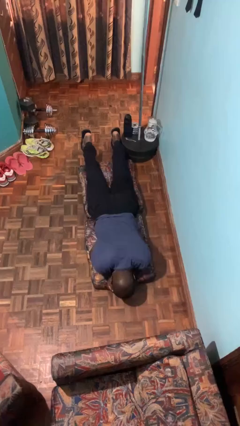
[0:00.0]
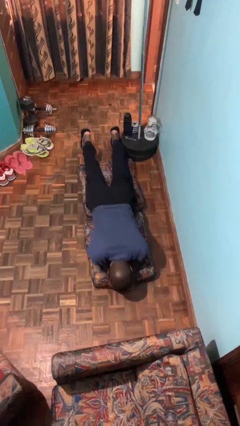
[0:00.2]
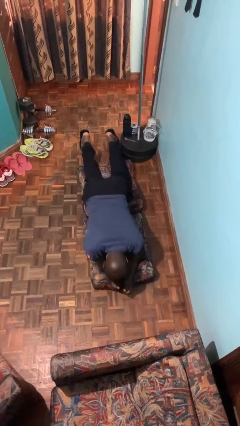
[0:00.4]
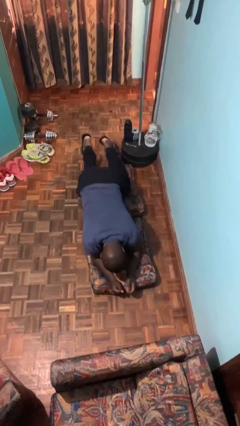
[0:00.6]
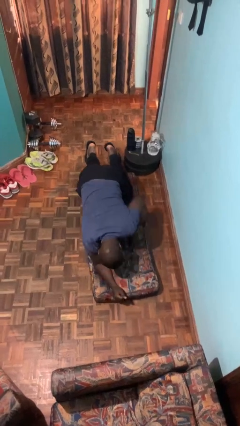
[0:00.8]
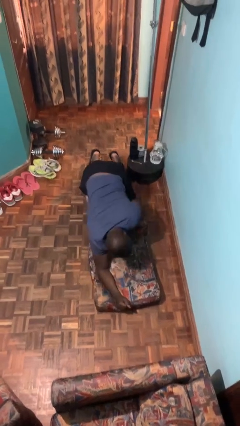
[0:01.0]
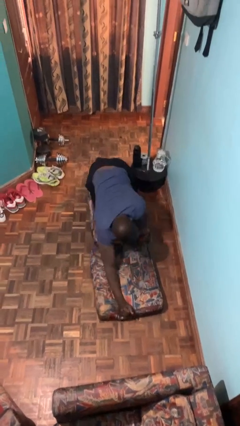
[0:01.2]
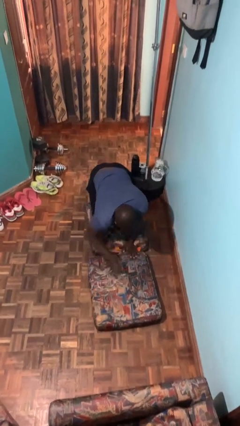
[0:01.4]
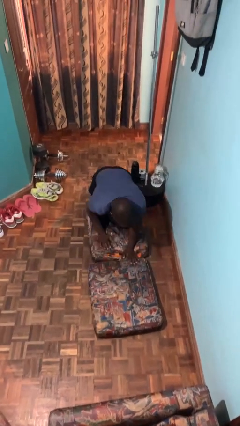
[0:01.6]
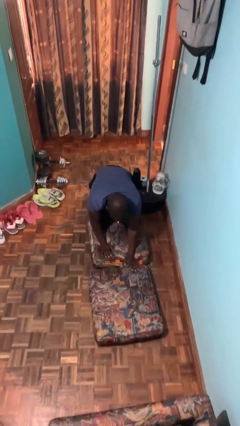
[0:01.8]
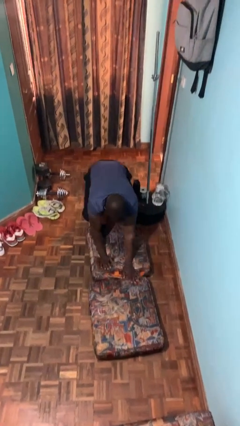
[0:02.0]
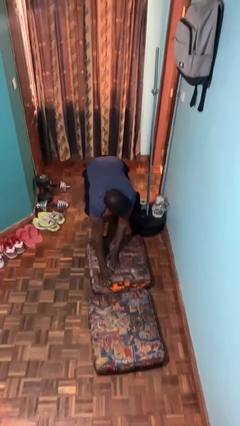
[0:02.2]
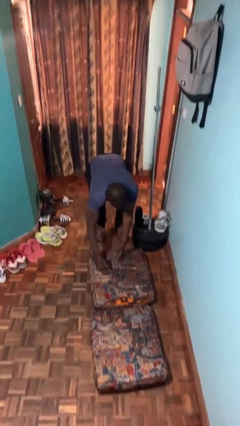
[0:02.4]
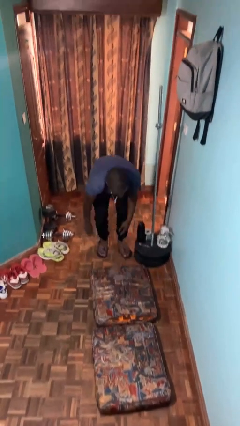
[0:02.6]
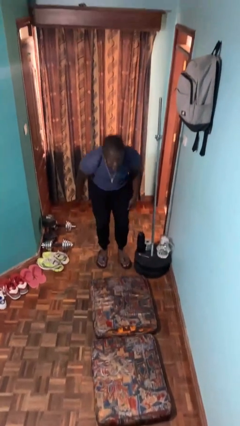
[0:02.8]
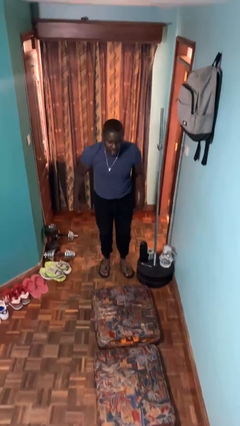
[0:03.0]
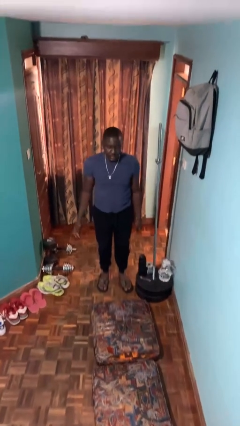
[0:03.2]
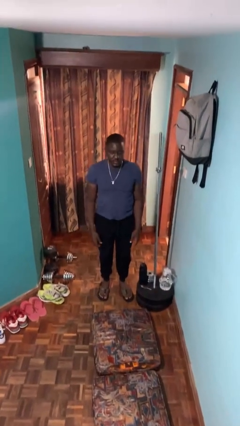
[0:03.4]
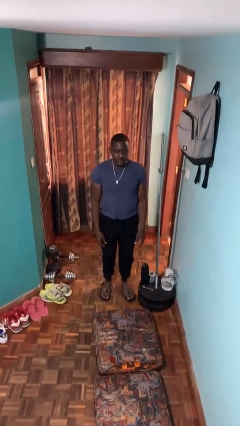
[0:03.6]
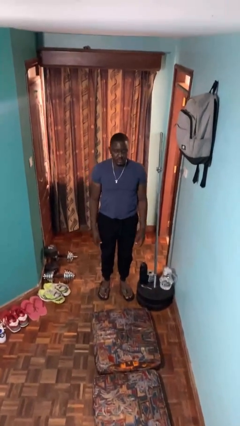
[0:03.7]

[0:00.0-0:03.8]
person stands up from floor

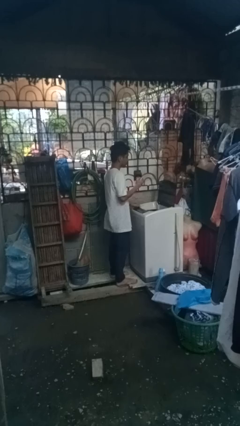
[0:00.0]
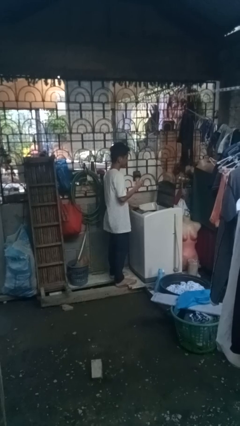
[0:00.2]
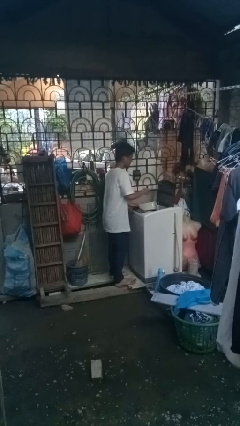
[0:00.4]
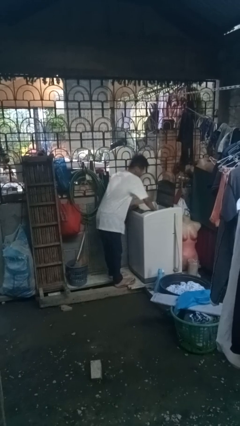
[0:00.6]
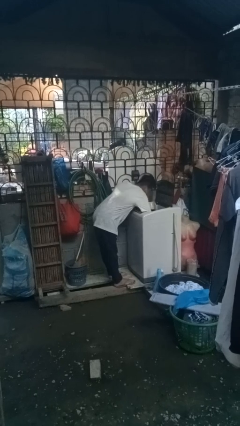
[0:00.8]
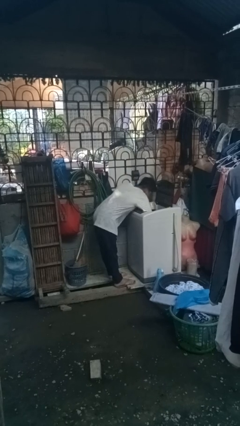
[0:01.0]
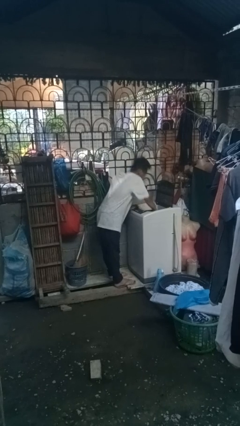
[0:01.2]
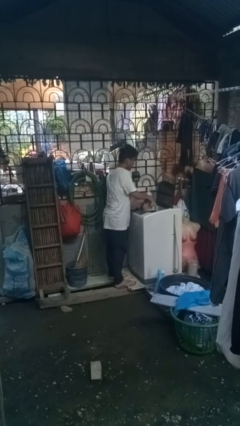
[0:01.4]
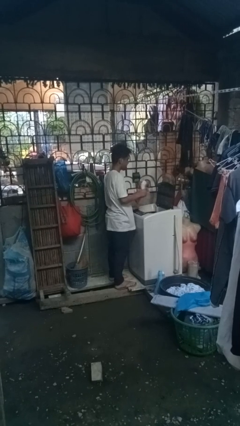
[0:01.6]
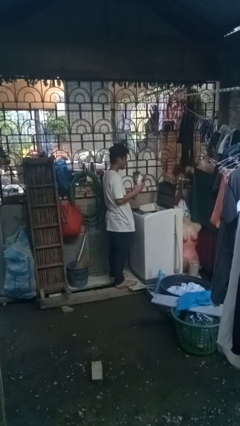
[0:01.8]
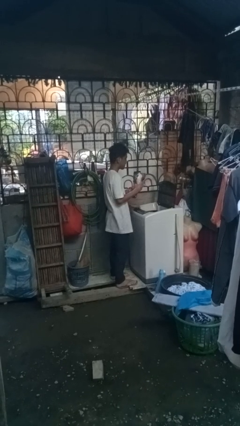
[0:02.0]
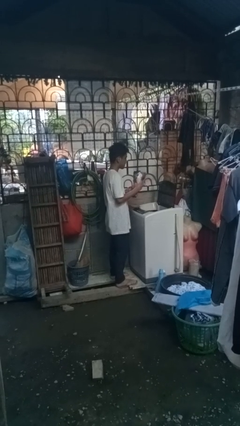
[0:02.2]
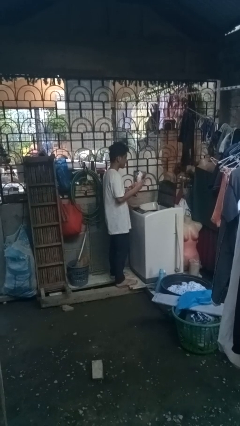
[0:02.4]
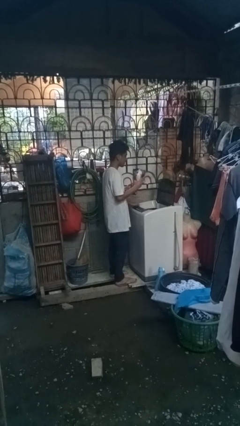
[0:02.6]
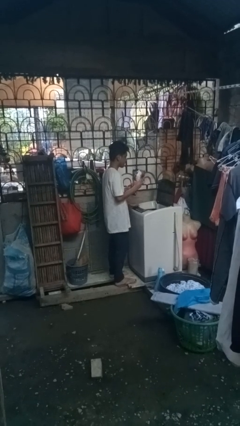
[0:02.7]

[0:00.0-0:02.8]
person unloads clotheswasher

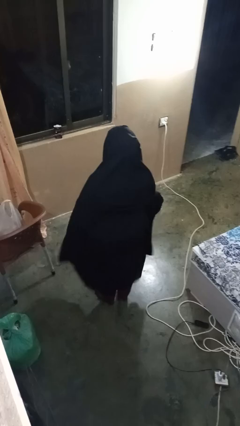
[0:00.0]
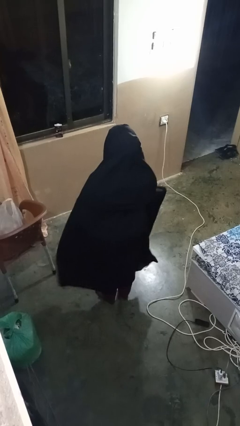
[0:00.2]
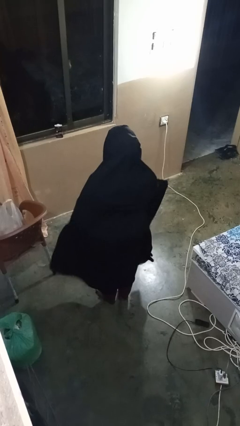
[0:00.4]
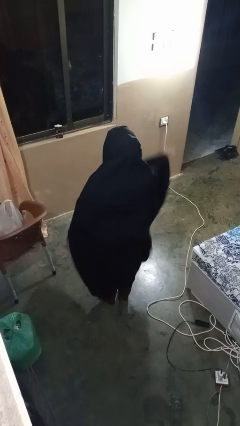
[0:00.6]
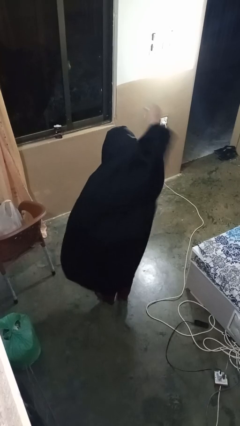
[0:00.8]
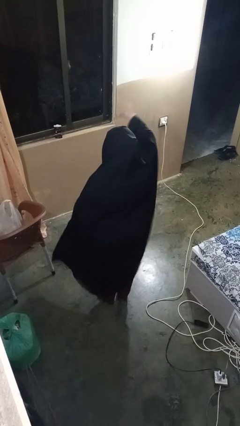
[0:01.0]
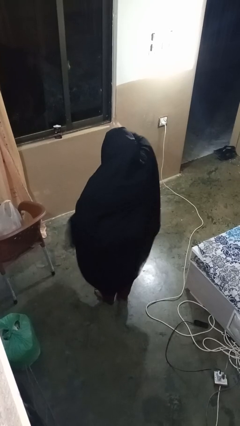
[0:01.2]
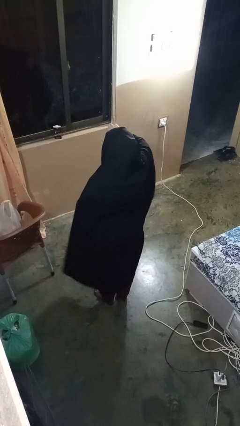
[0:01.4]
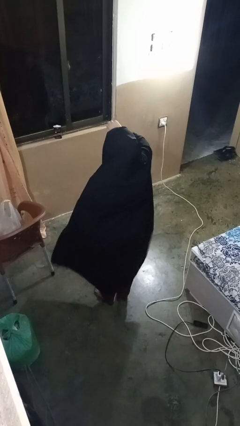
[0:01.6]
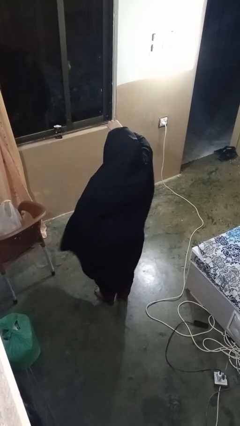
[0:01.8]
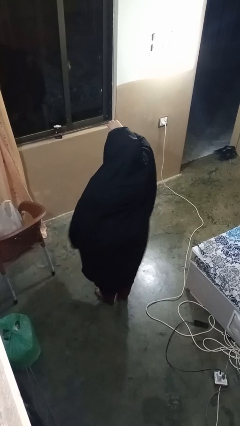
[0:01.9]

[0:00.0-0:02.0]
person gestures thumbs down

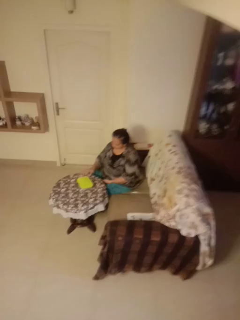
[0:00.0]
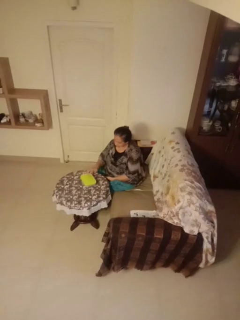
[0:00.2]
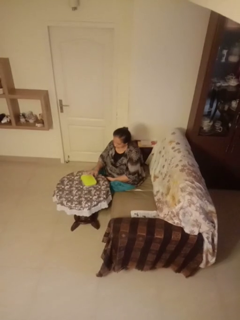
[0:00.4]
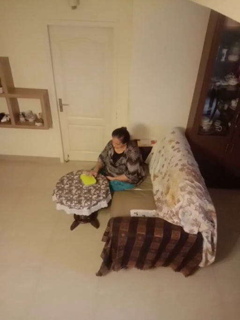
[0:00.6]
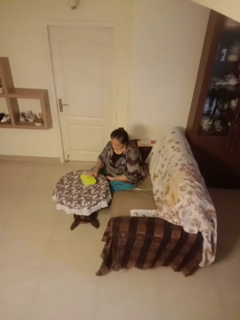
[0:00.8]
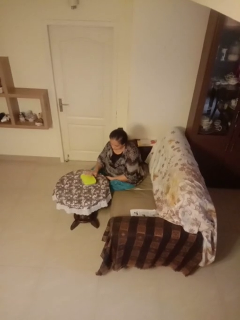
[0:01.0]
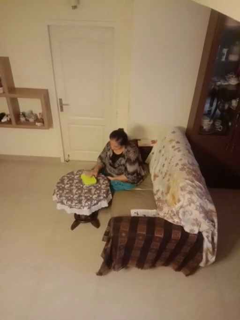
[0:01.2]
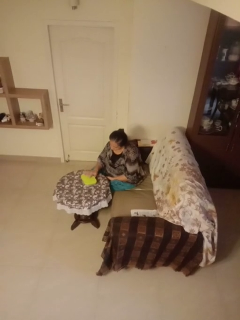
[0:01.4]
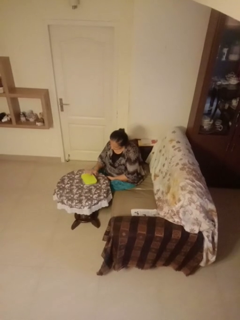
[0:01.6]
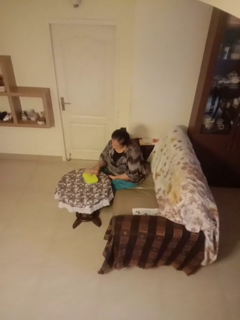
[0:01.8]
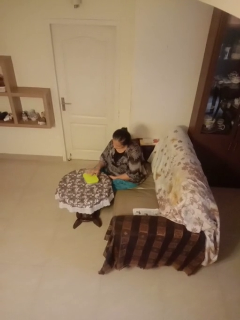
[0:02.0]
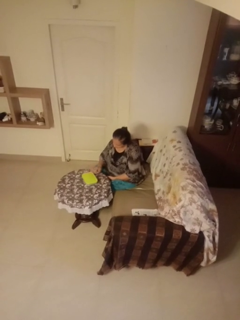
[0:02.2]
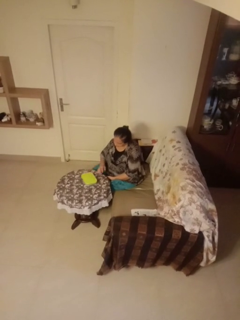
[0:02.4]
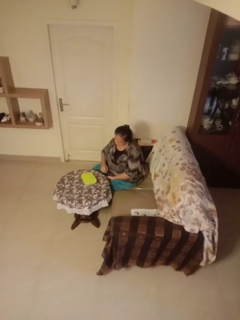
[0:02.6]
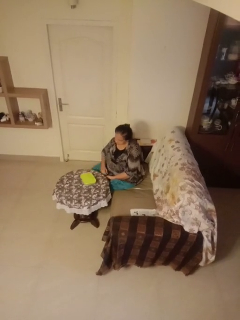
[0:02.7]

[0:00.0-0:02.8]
person taps object with finger

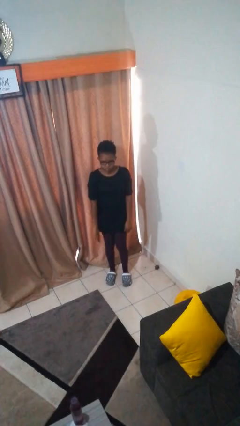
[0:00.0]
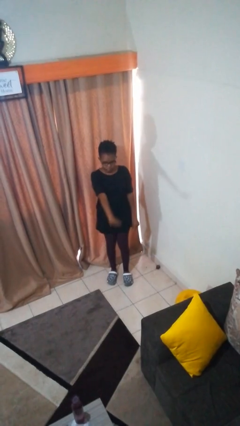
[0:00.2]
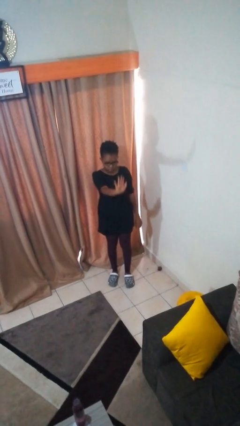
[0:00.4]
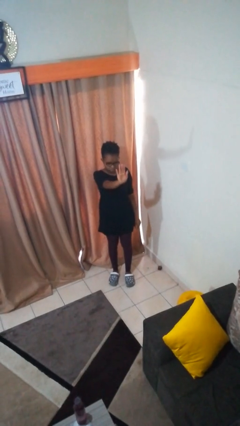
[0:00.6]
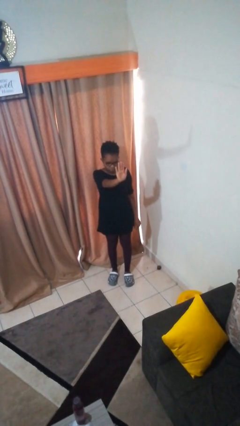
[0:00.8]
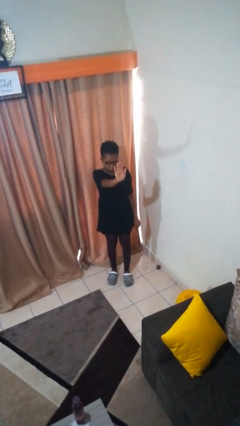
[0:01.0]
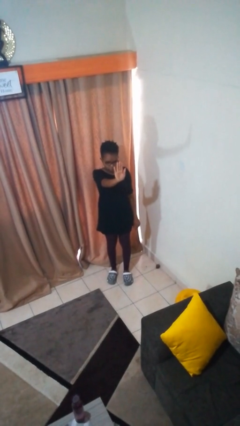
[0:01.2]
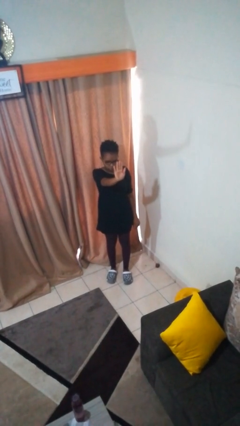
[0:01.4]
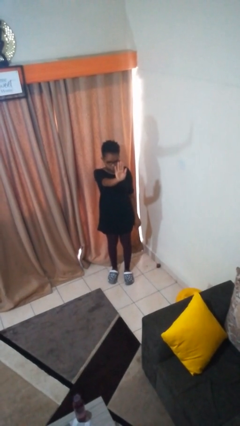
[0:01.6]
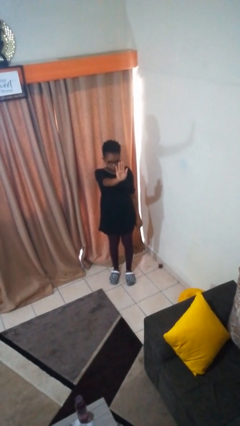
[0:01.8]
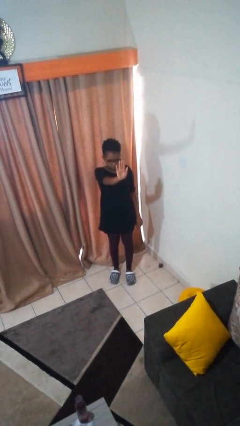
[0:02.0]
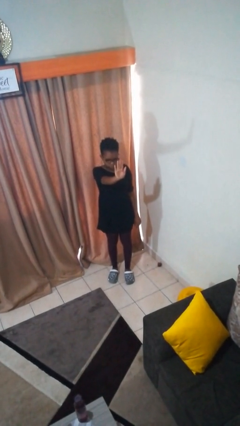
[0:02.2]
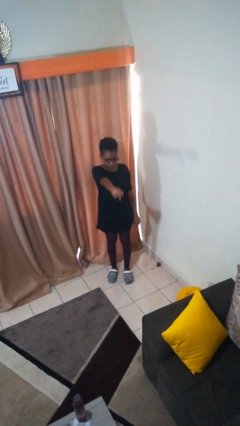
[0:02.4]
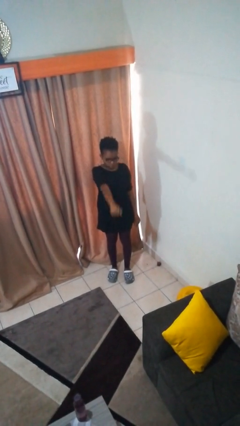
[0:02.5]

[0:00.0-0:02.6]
person gestures stop

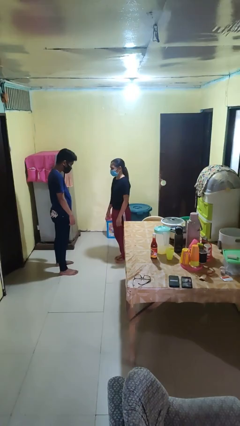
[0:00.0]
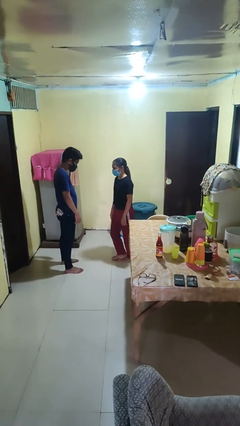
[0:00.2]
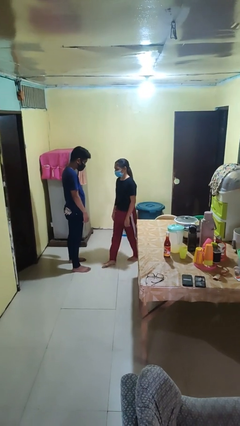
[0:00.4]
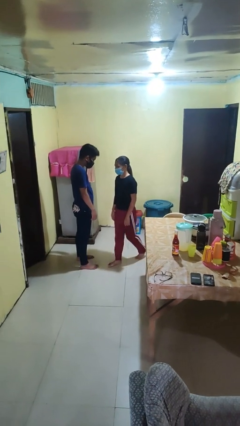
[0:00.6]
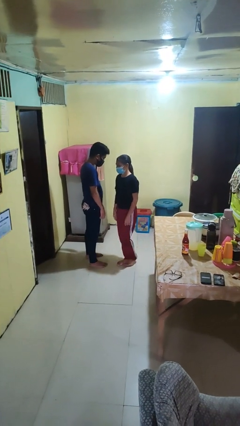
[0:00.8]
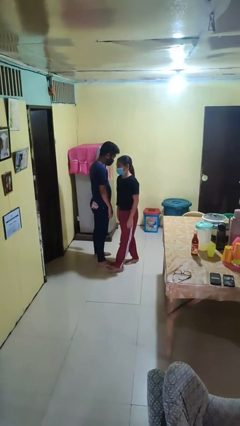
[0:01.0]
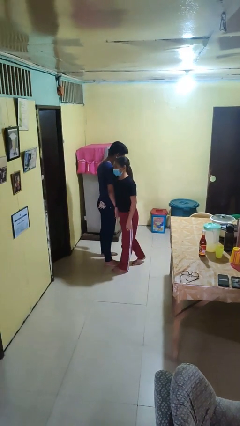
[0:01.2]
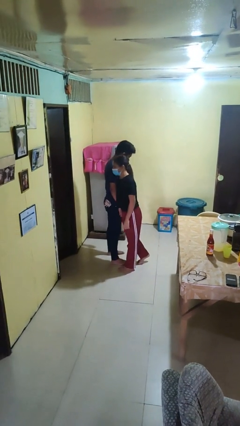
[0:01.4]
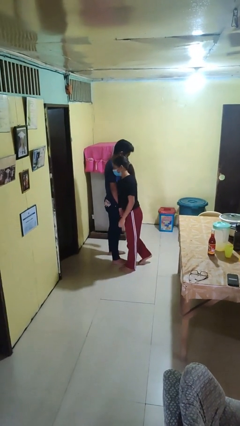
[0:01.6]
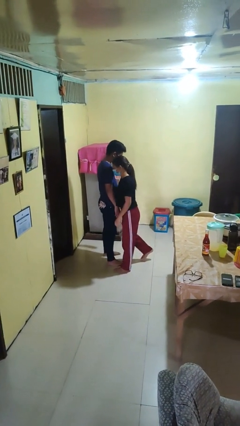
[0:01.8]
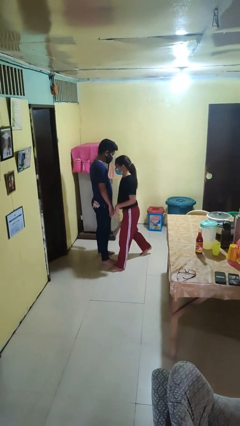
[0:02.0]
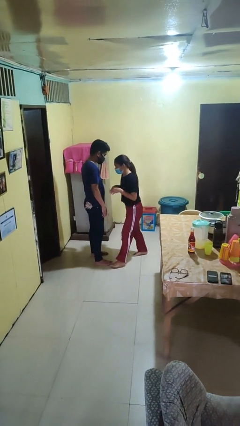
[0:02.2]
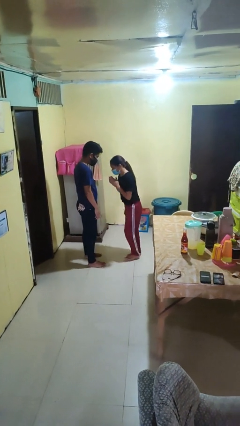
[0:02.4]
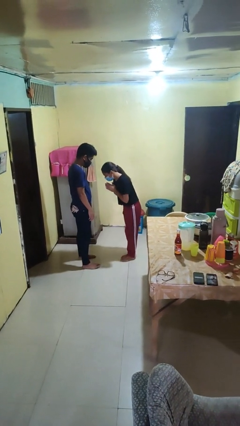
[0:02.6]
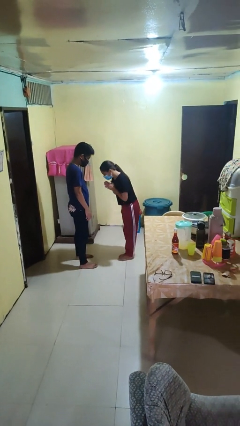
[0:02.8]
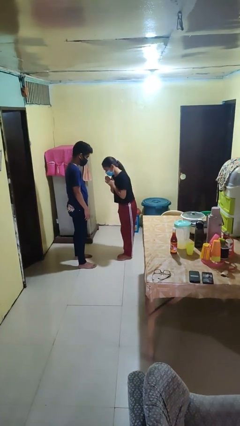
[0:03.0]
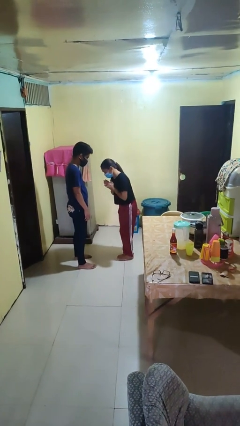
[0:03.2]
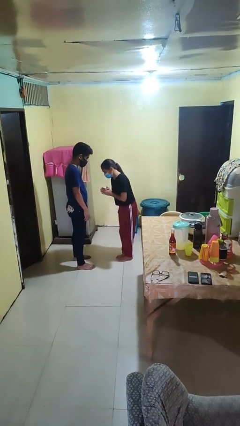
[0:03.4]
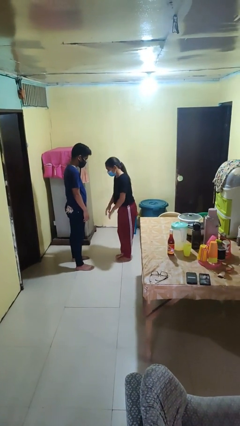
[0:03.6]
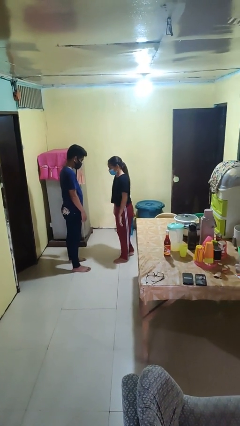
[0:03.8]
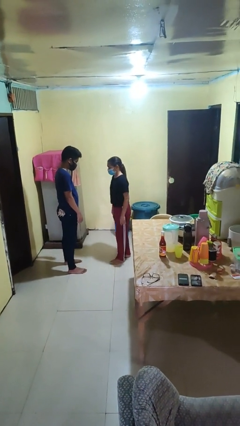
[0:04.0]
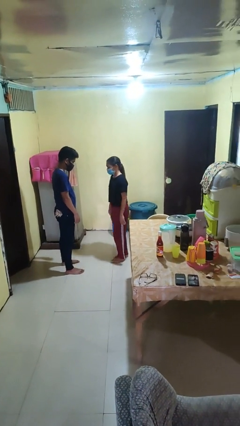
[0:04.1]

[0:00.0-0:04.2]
person bumps into person
